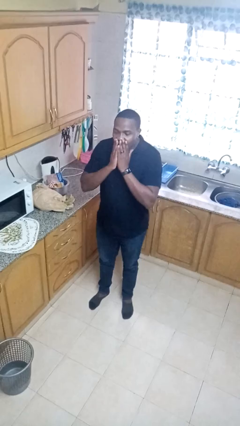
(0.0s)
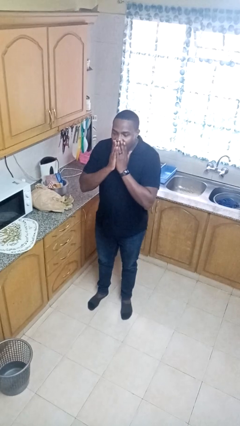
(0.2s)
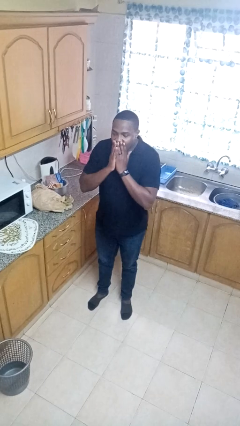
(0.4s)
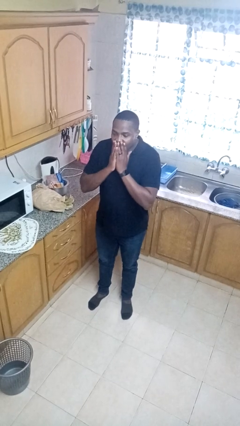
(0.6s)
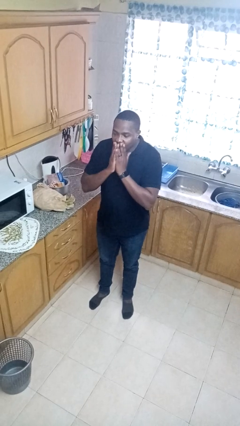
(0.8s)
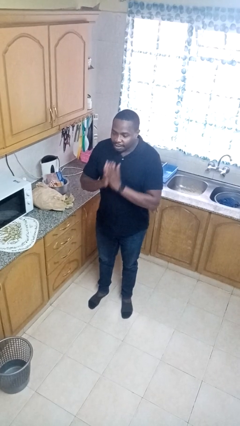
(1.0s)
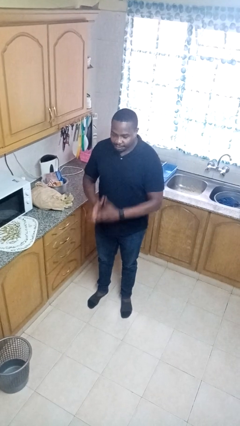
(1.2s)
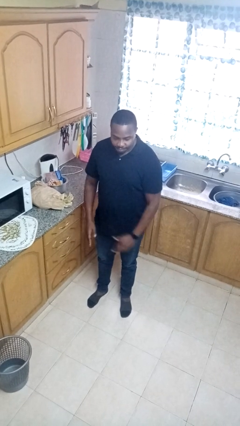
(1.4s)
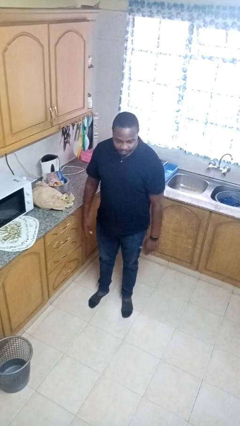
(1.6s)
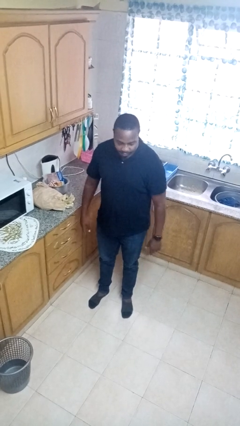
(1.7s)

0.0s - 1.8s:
person yawns

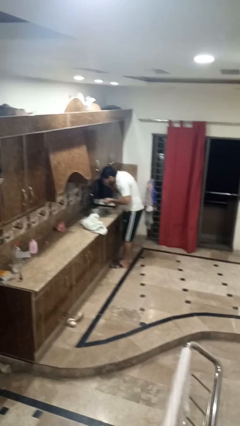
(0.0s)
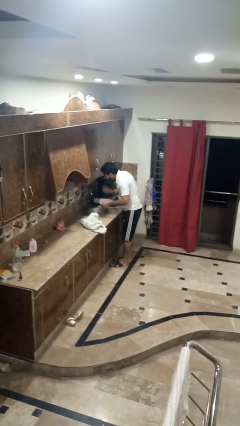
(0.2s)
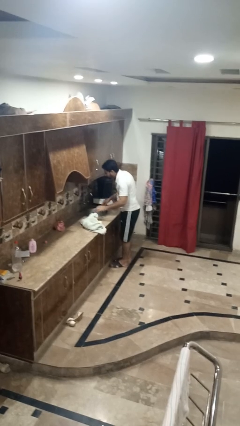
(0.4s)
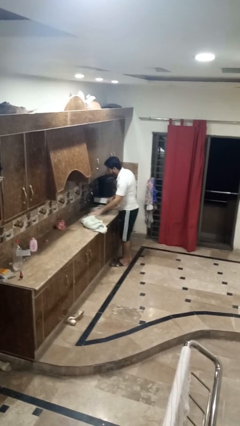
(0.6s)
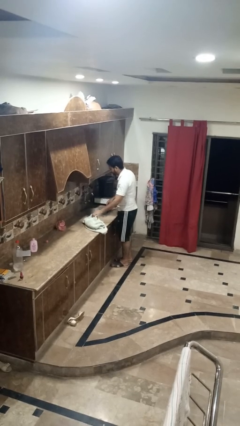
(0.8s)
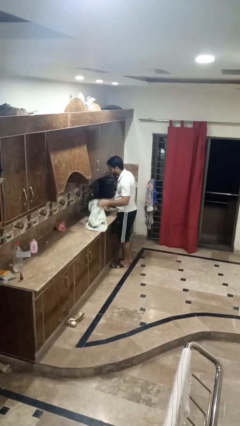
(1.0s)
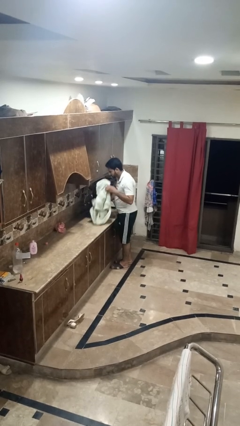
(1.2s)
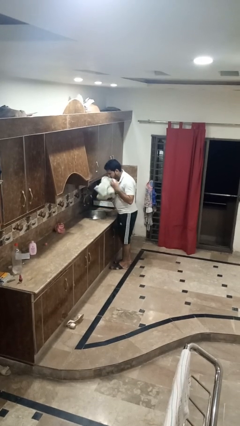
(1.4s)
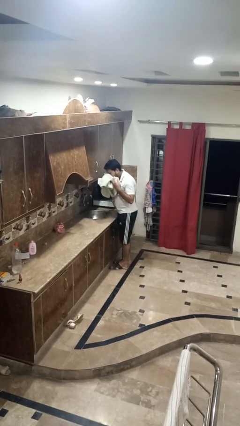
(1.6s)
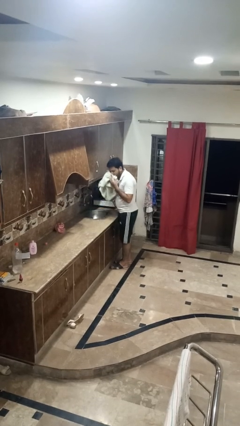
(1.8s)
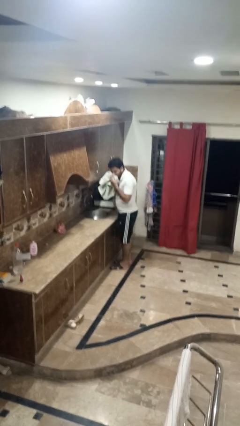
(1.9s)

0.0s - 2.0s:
person washes face

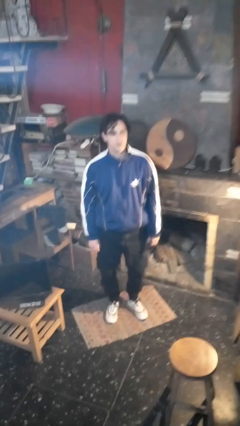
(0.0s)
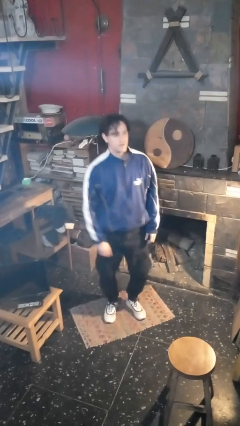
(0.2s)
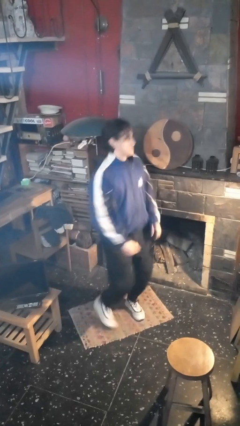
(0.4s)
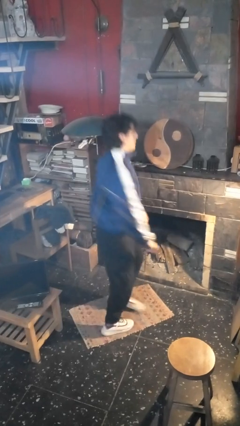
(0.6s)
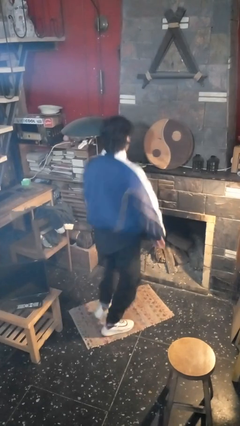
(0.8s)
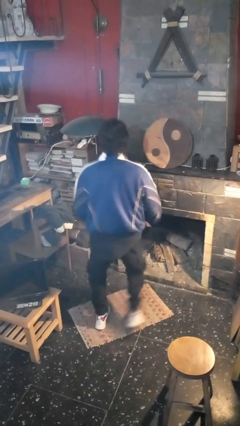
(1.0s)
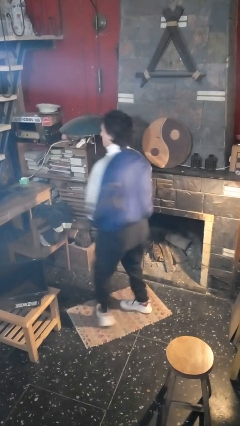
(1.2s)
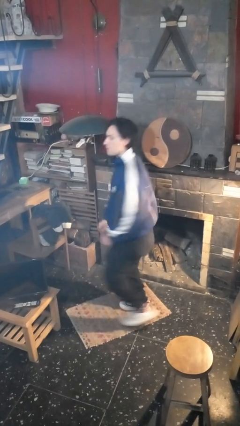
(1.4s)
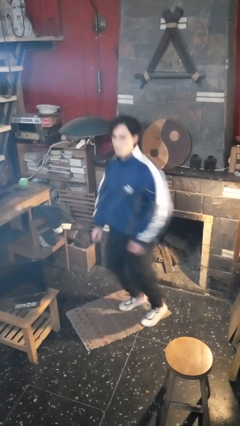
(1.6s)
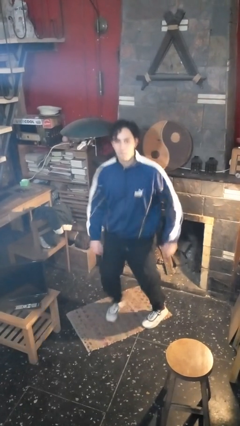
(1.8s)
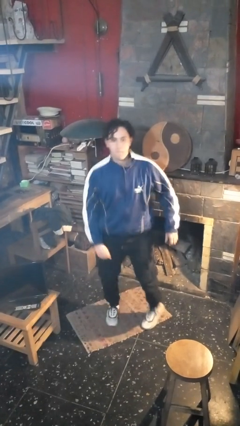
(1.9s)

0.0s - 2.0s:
person twirls

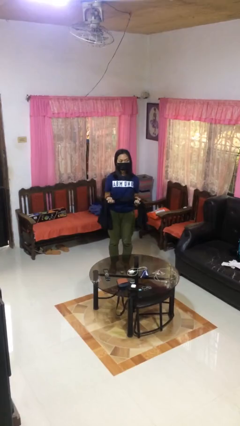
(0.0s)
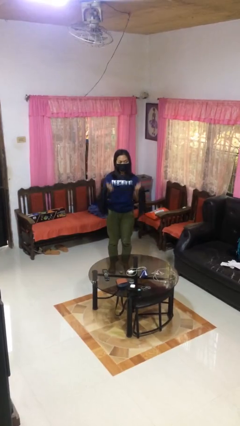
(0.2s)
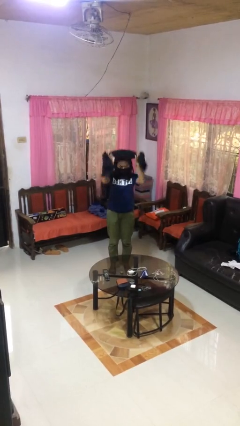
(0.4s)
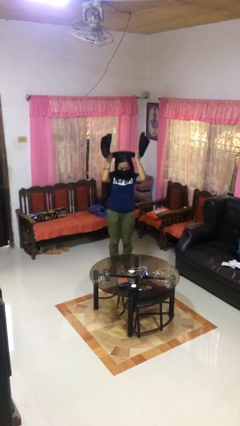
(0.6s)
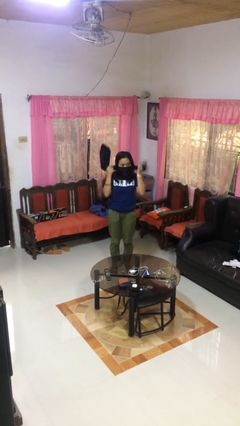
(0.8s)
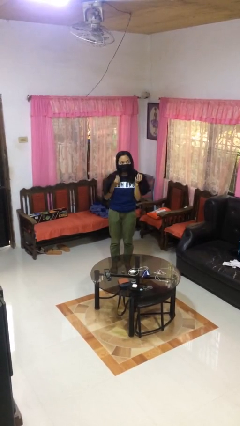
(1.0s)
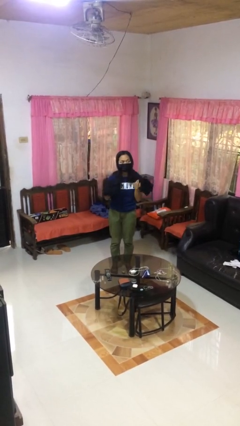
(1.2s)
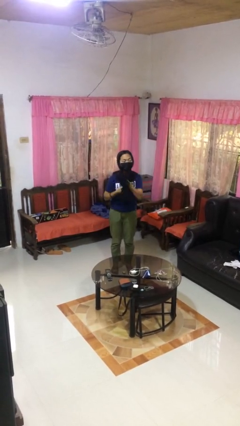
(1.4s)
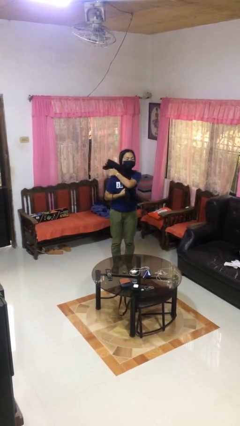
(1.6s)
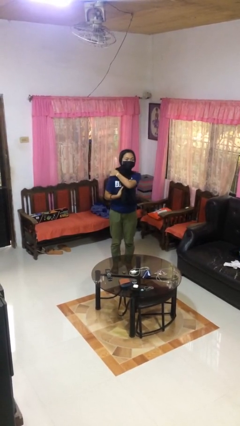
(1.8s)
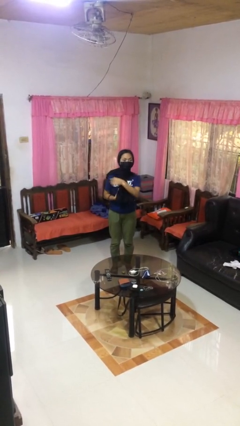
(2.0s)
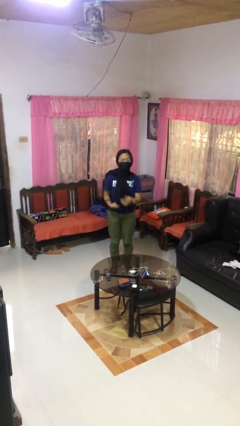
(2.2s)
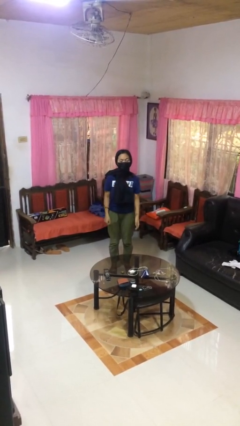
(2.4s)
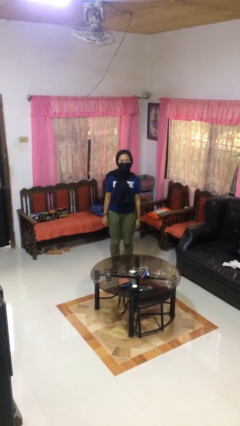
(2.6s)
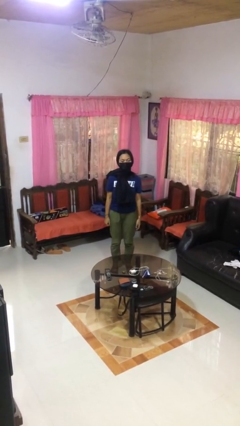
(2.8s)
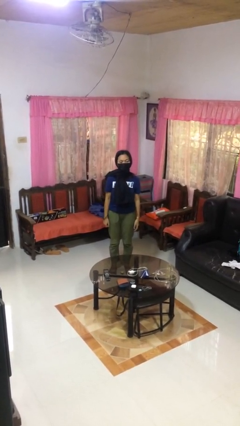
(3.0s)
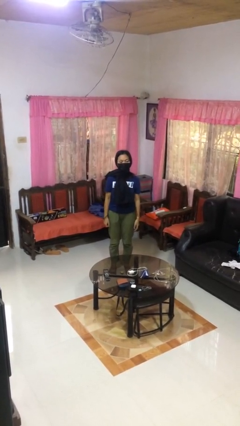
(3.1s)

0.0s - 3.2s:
person puts on scarf

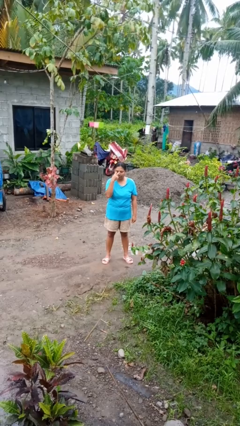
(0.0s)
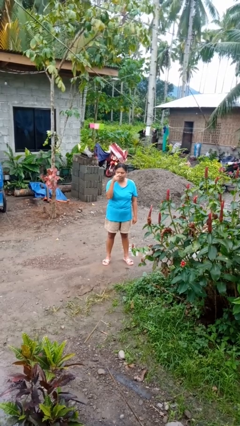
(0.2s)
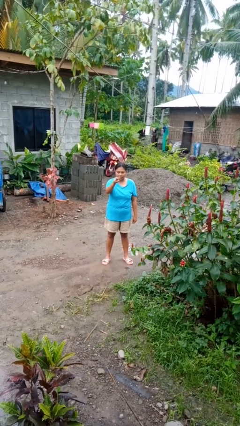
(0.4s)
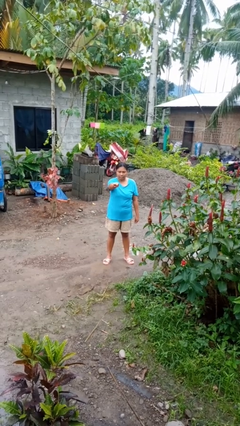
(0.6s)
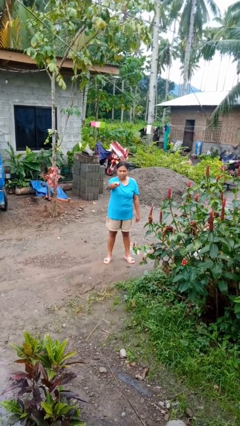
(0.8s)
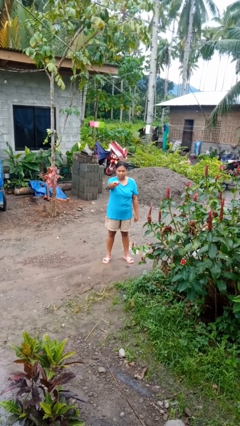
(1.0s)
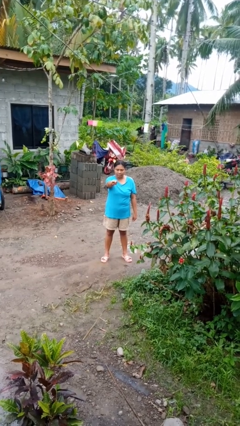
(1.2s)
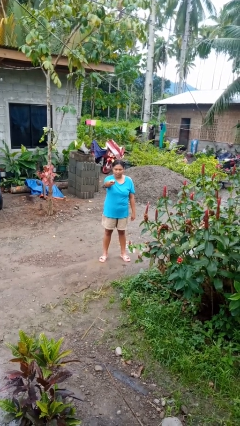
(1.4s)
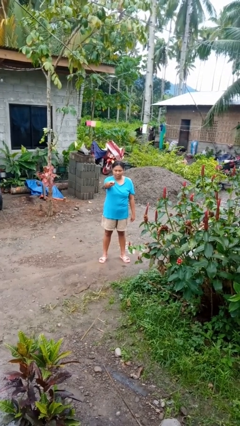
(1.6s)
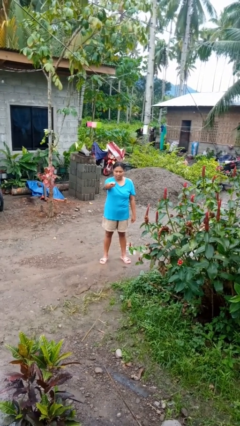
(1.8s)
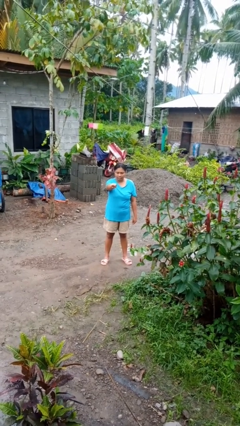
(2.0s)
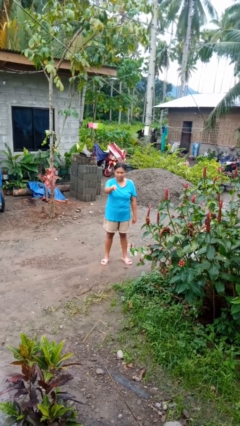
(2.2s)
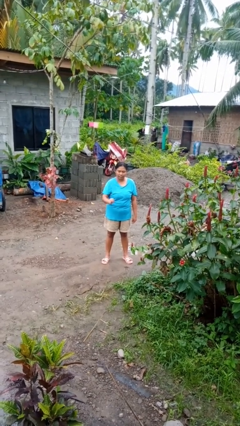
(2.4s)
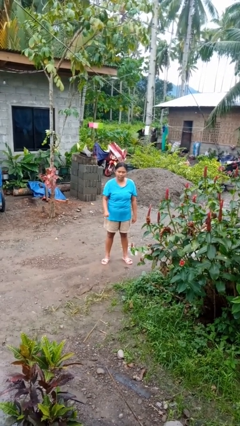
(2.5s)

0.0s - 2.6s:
person gestures watch closely

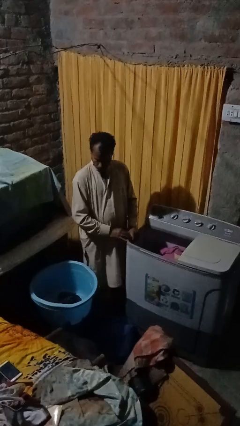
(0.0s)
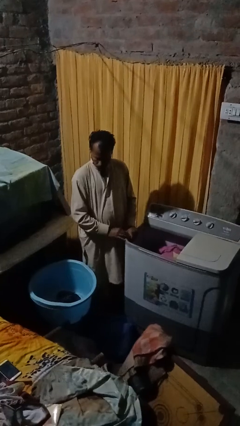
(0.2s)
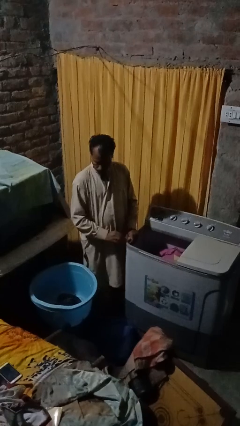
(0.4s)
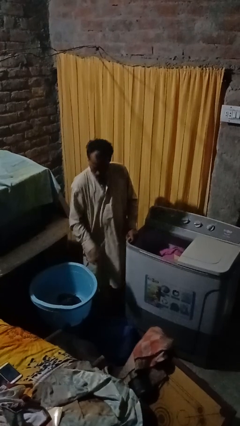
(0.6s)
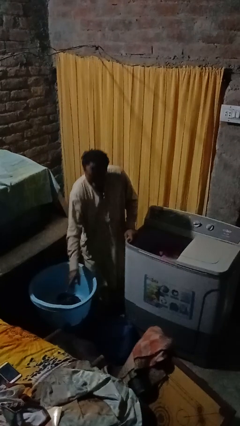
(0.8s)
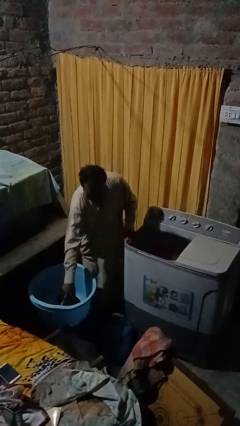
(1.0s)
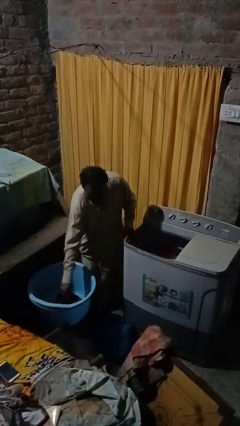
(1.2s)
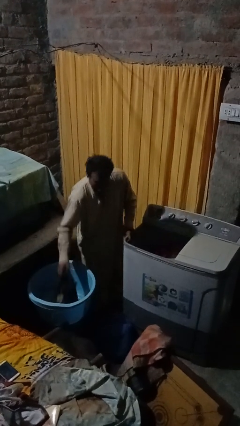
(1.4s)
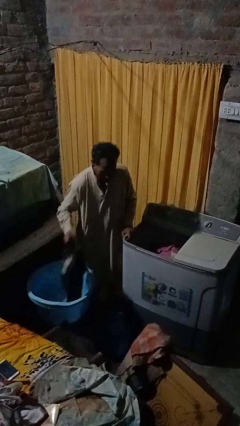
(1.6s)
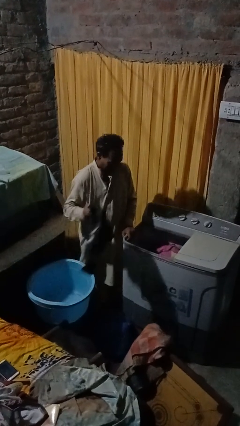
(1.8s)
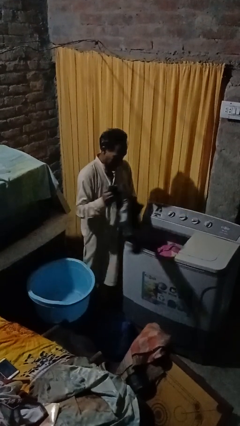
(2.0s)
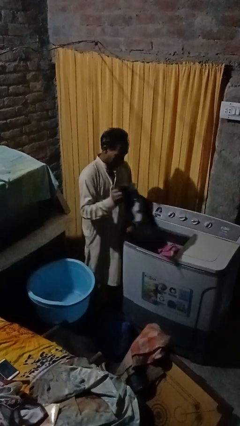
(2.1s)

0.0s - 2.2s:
person loads clotheswasher

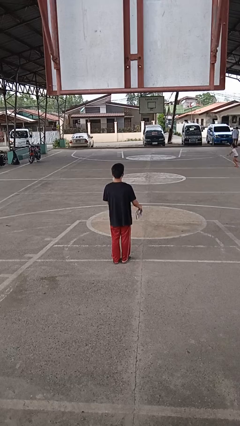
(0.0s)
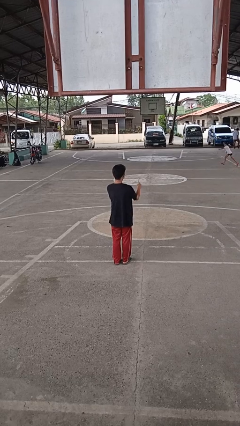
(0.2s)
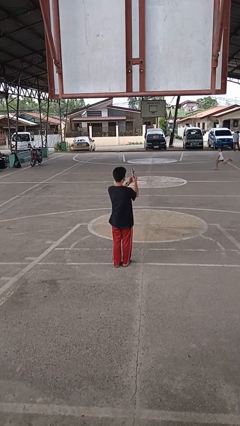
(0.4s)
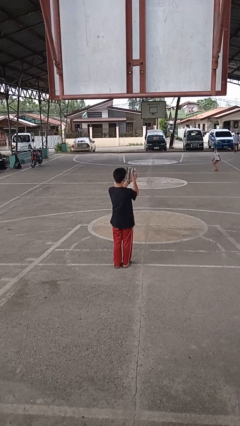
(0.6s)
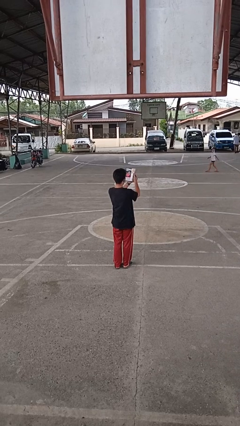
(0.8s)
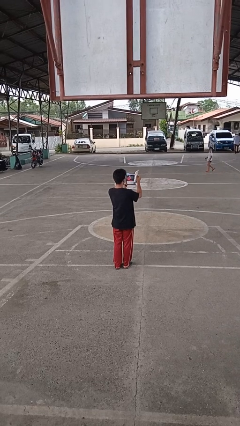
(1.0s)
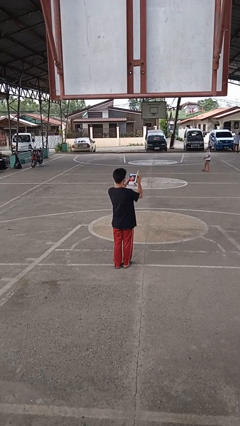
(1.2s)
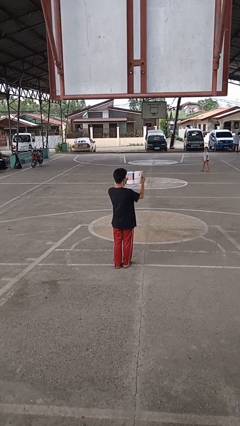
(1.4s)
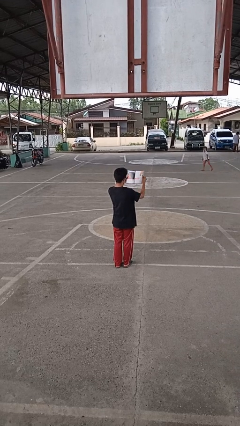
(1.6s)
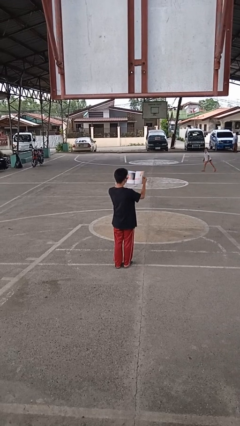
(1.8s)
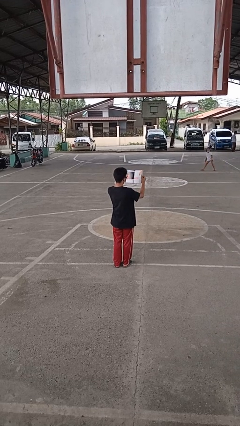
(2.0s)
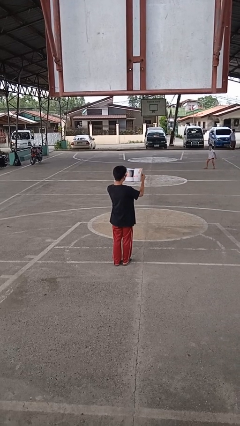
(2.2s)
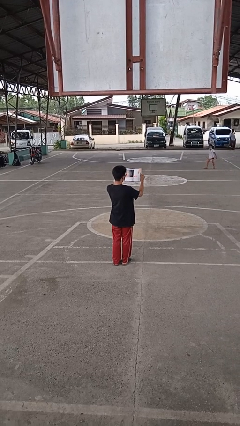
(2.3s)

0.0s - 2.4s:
person reads magazine

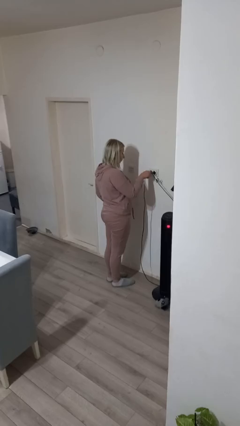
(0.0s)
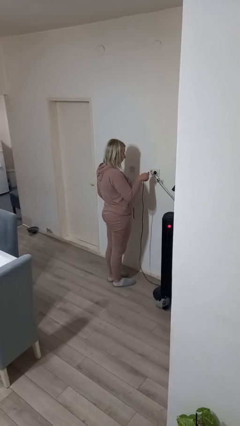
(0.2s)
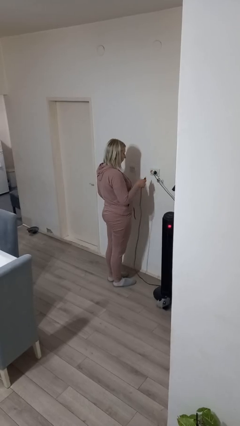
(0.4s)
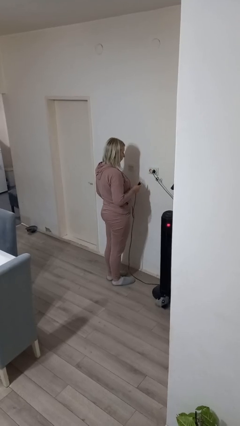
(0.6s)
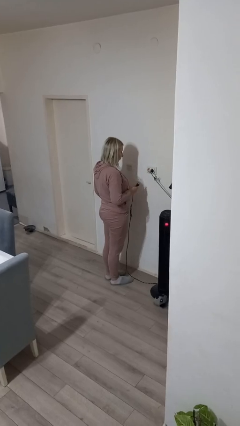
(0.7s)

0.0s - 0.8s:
person unplugs from electrical socket
